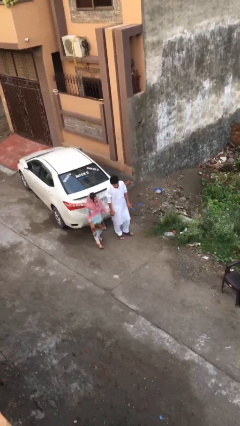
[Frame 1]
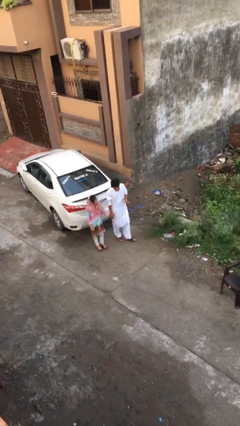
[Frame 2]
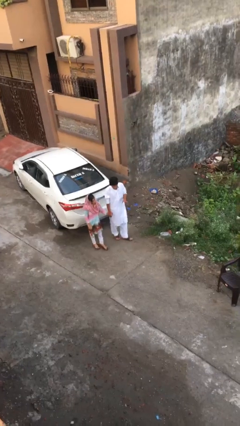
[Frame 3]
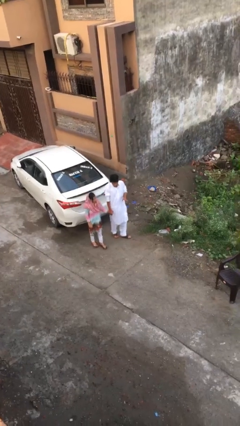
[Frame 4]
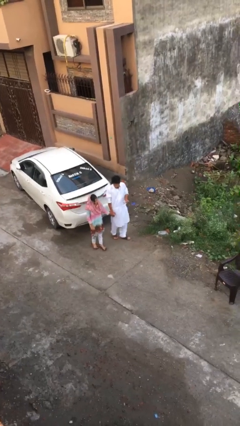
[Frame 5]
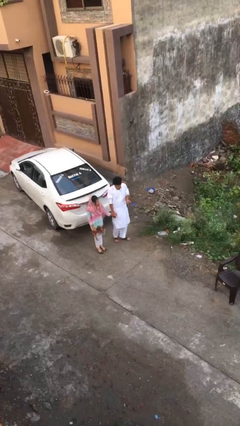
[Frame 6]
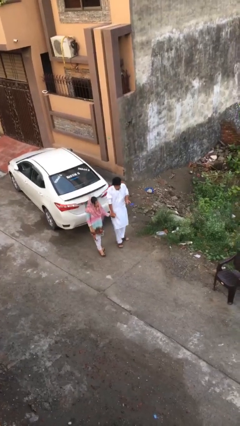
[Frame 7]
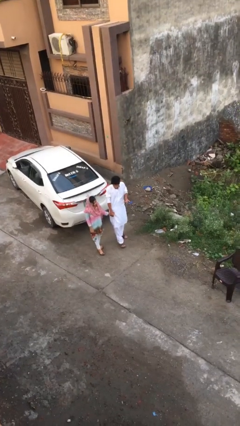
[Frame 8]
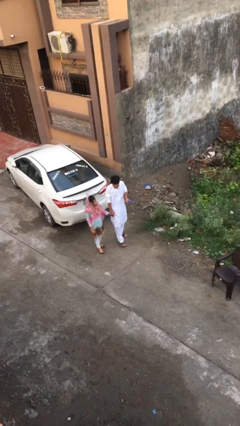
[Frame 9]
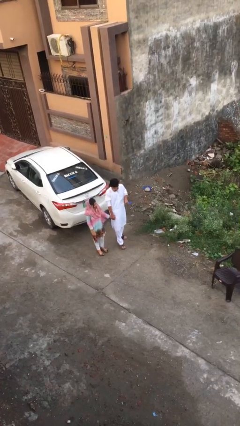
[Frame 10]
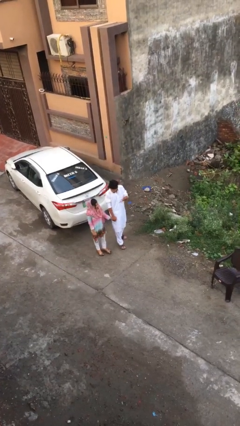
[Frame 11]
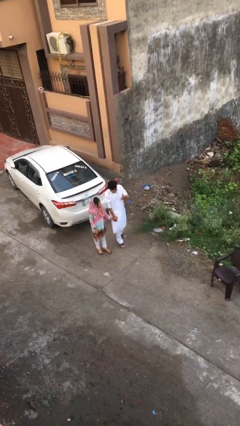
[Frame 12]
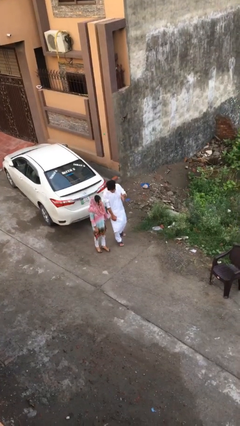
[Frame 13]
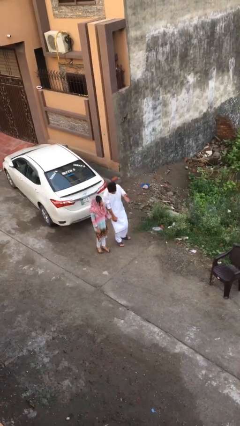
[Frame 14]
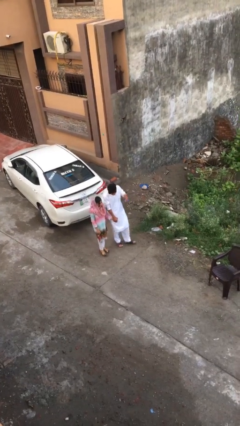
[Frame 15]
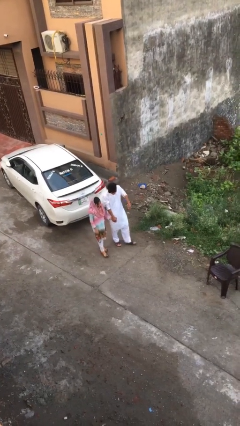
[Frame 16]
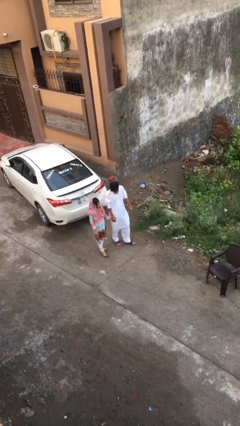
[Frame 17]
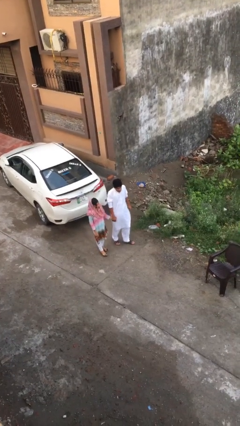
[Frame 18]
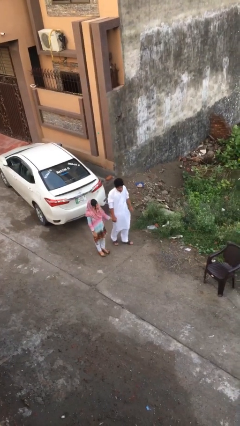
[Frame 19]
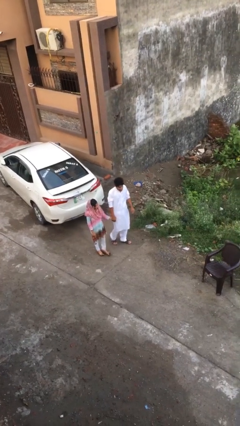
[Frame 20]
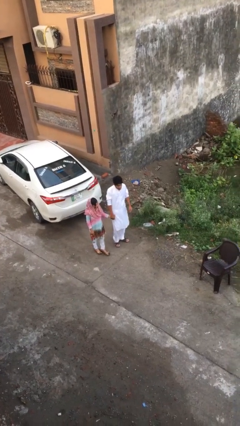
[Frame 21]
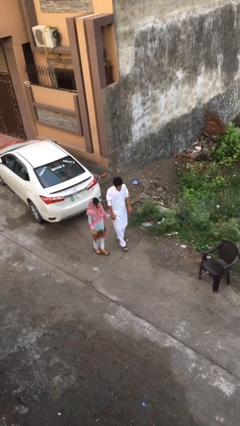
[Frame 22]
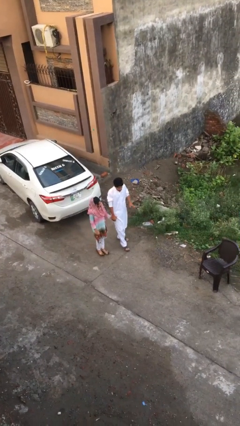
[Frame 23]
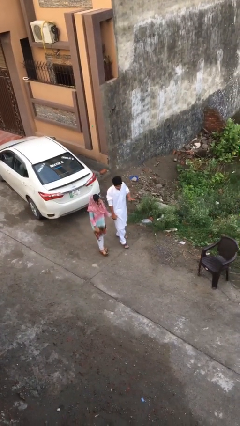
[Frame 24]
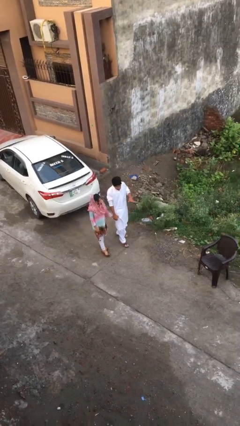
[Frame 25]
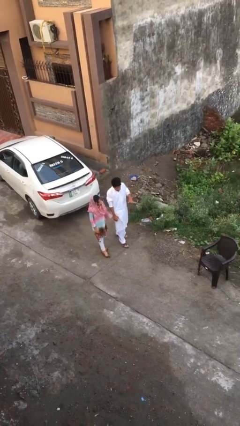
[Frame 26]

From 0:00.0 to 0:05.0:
person holds hand

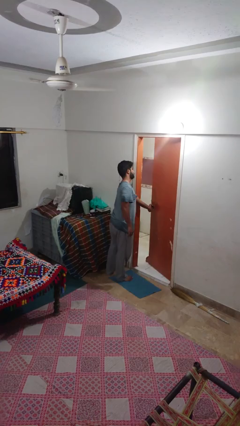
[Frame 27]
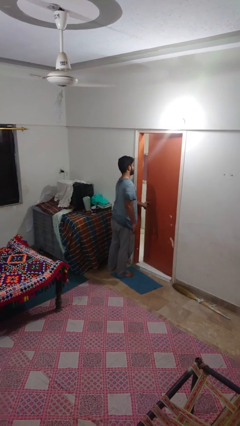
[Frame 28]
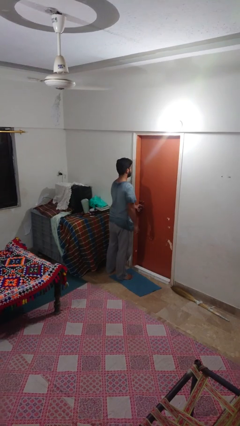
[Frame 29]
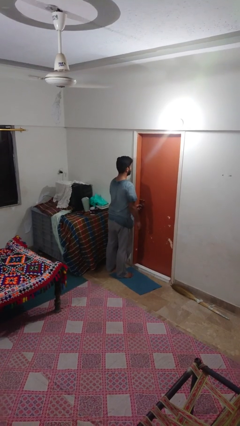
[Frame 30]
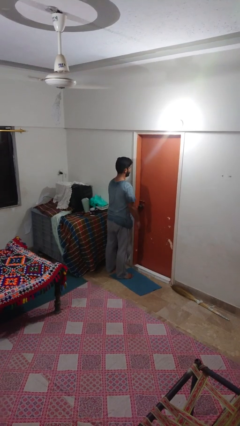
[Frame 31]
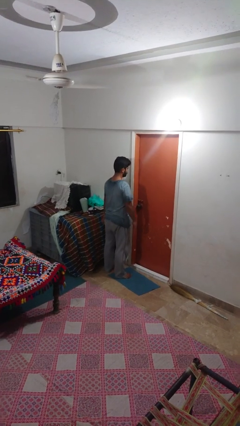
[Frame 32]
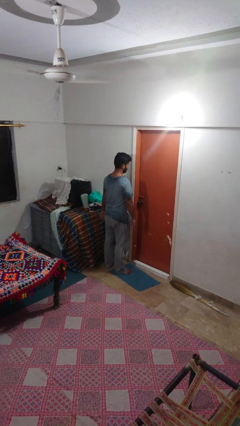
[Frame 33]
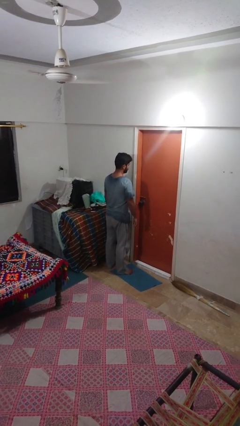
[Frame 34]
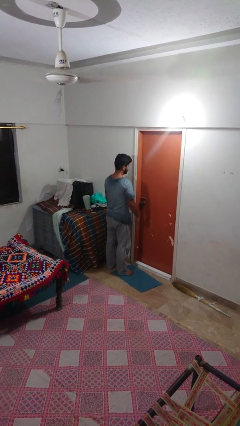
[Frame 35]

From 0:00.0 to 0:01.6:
person closes facility door

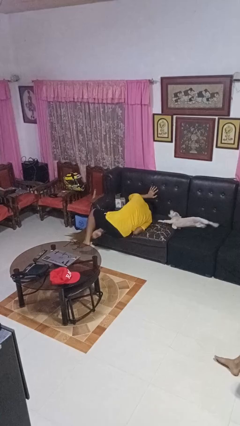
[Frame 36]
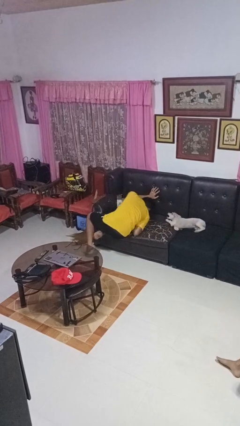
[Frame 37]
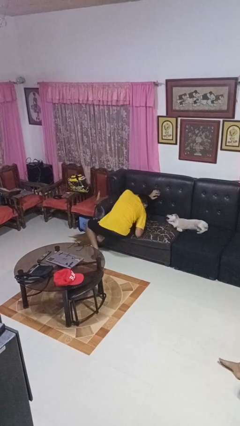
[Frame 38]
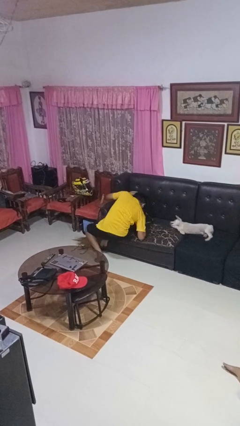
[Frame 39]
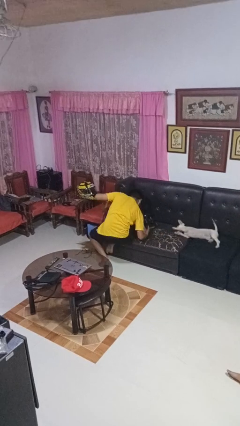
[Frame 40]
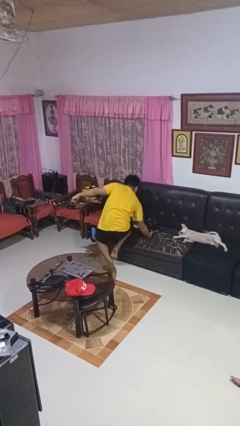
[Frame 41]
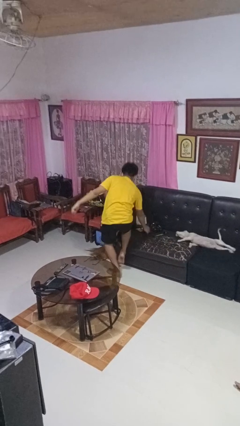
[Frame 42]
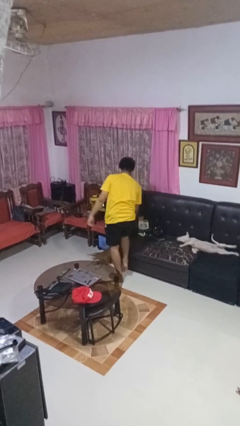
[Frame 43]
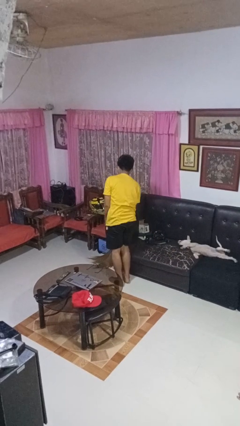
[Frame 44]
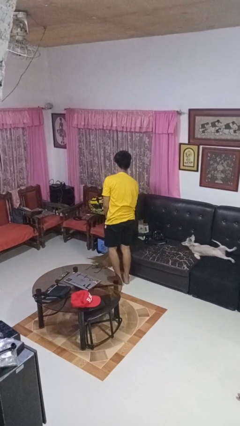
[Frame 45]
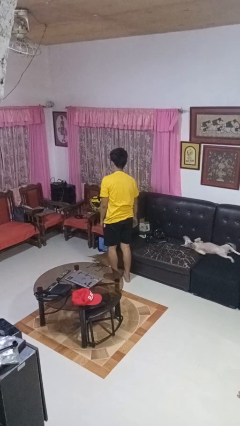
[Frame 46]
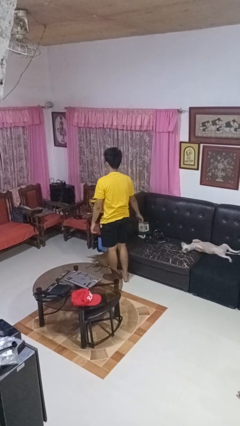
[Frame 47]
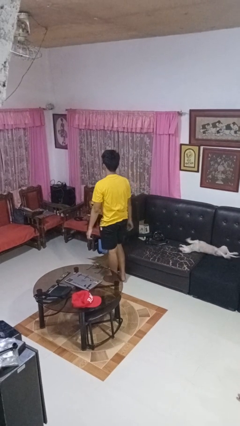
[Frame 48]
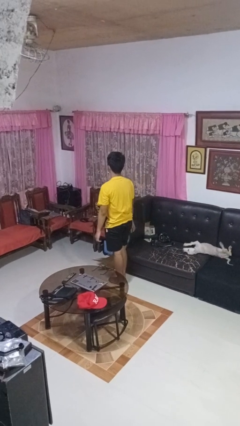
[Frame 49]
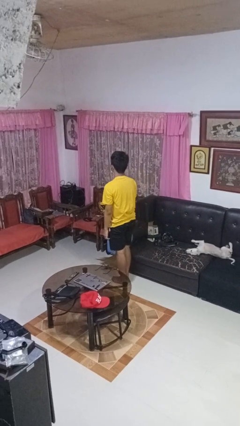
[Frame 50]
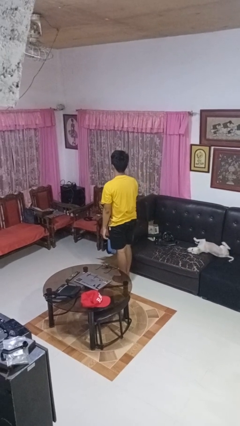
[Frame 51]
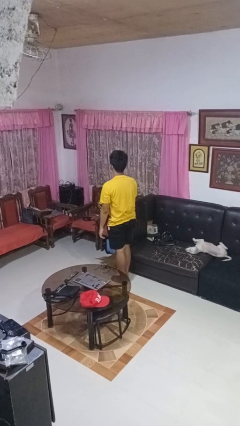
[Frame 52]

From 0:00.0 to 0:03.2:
person stands up

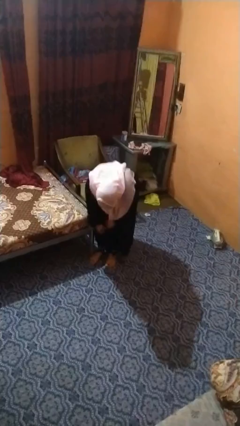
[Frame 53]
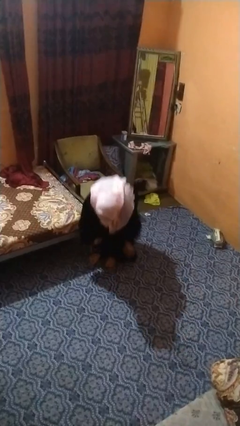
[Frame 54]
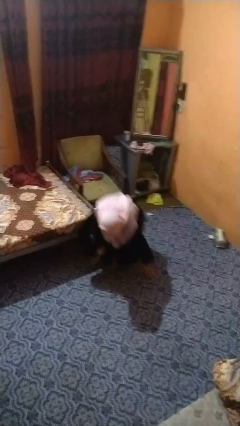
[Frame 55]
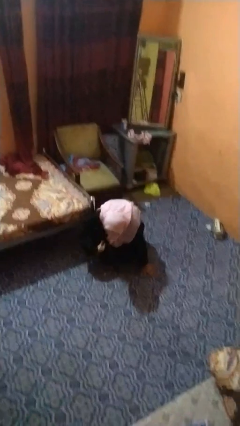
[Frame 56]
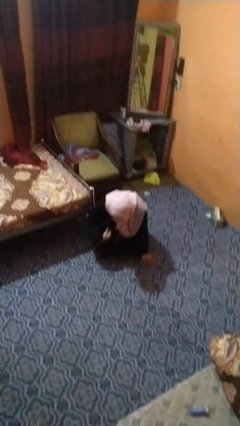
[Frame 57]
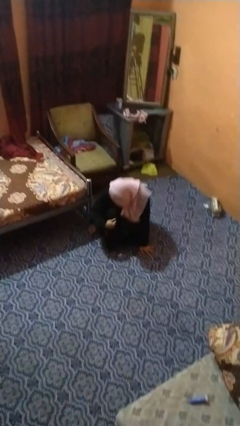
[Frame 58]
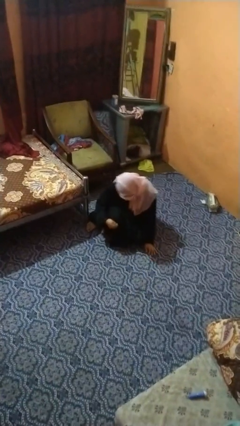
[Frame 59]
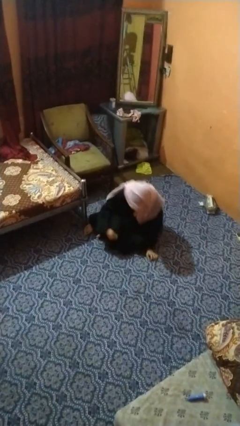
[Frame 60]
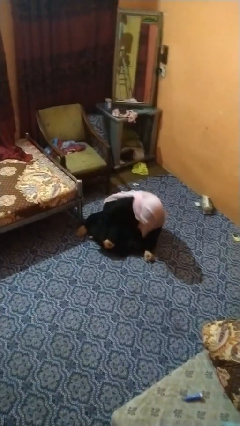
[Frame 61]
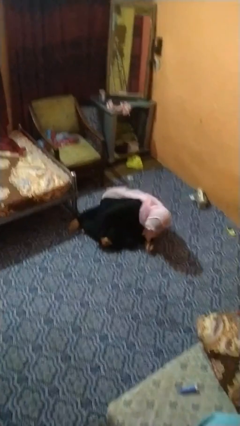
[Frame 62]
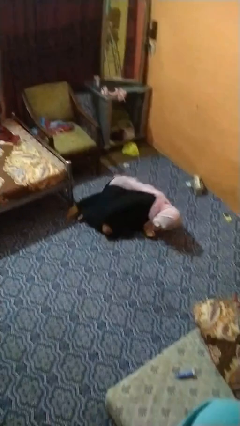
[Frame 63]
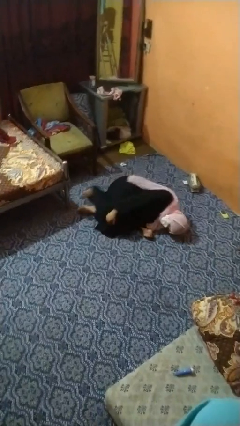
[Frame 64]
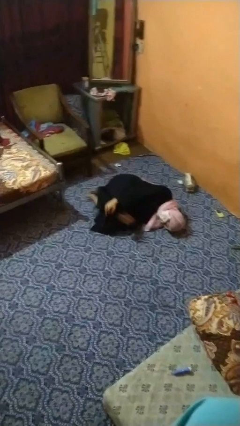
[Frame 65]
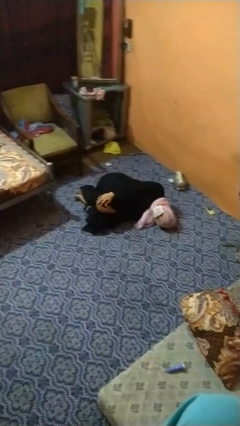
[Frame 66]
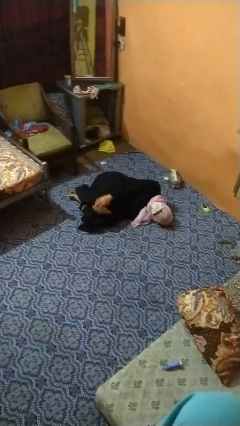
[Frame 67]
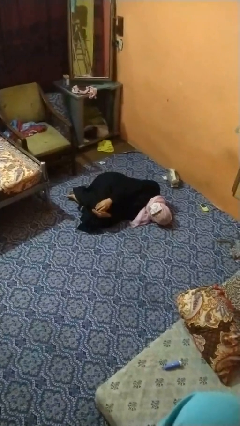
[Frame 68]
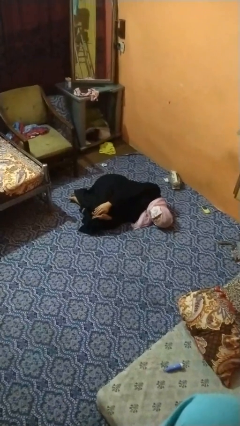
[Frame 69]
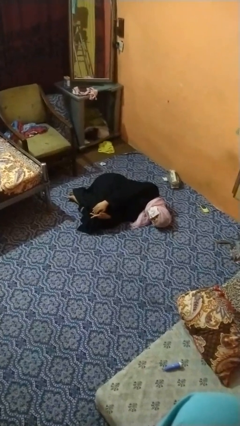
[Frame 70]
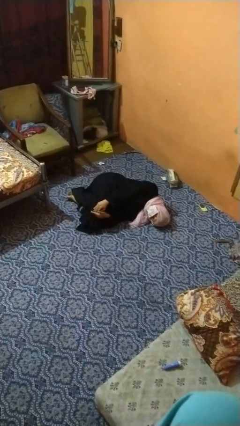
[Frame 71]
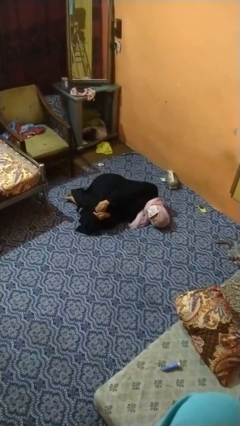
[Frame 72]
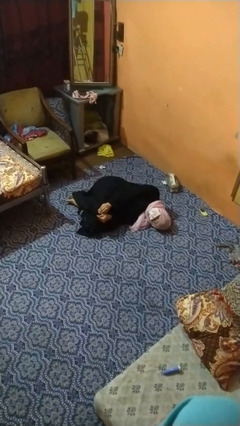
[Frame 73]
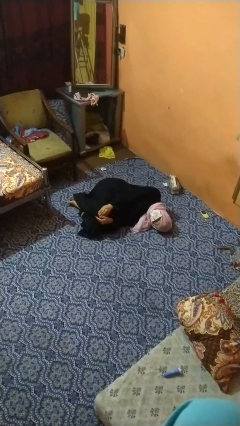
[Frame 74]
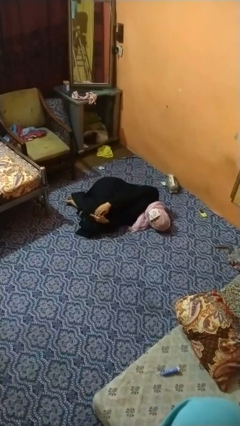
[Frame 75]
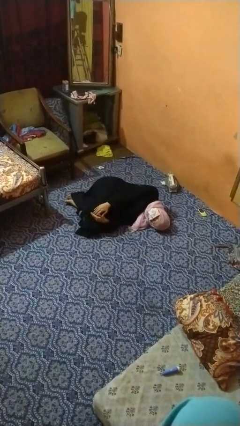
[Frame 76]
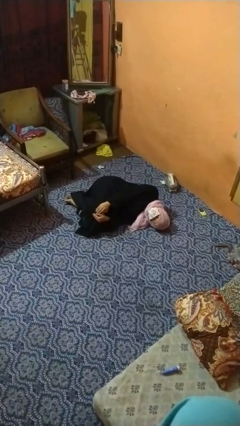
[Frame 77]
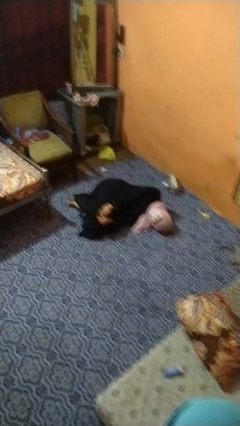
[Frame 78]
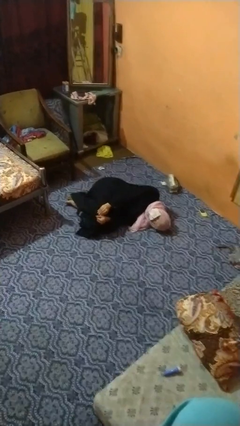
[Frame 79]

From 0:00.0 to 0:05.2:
person lies down on floor

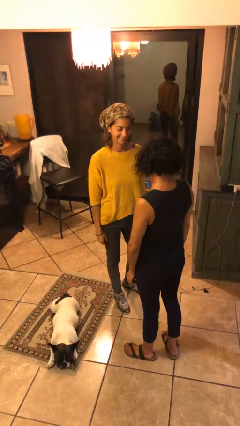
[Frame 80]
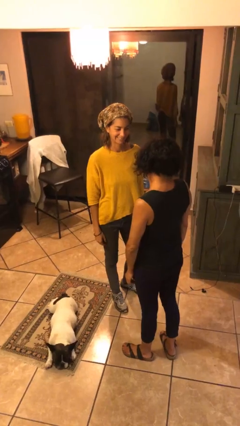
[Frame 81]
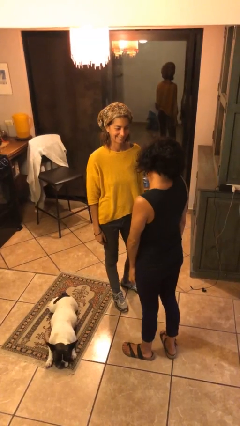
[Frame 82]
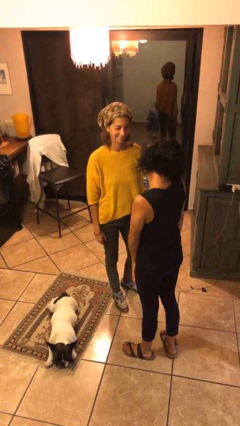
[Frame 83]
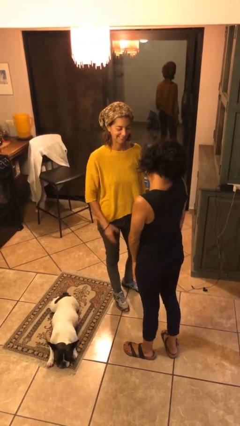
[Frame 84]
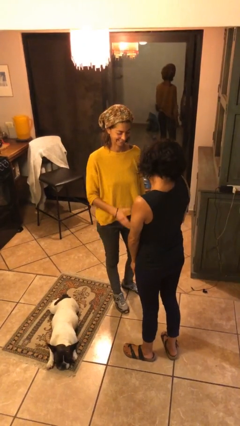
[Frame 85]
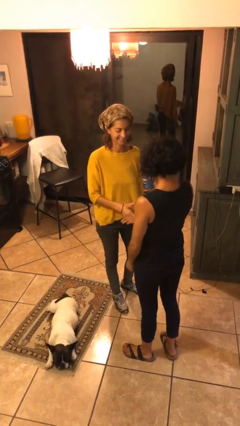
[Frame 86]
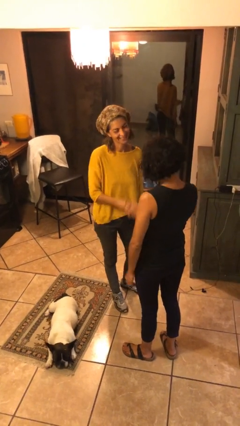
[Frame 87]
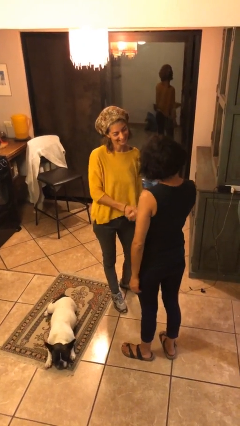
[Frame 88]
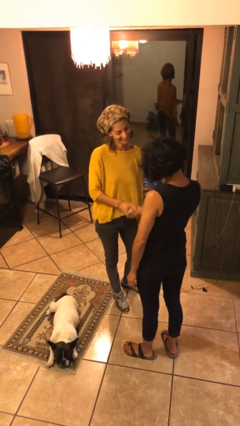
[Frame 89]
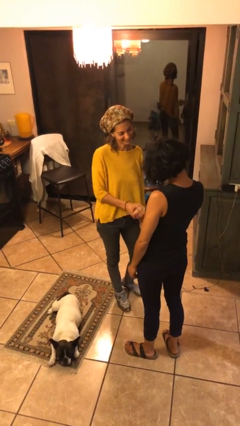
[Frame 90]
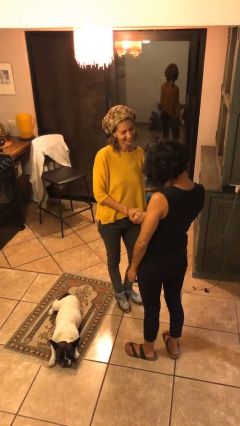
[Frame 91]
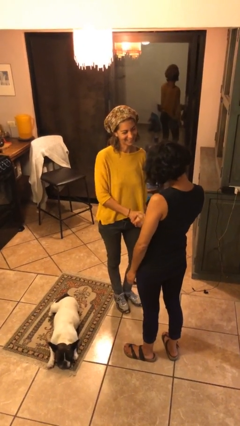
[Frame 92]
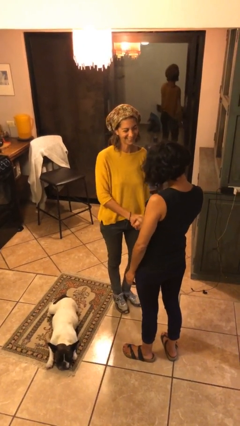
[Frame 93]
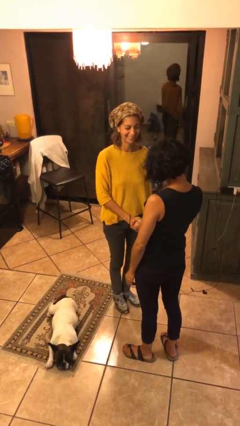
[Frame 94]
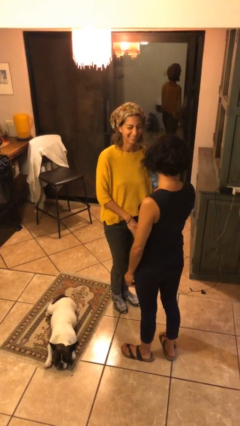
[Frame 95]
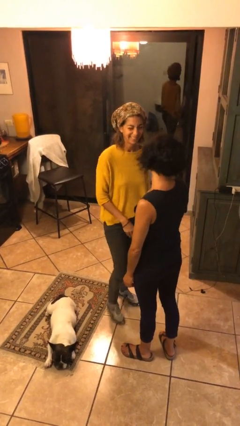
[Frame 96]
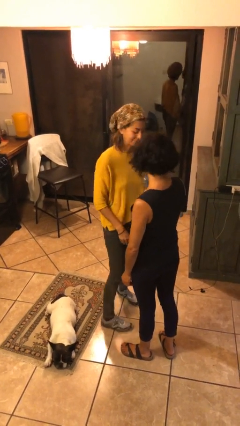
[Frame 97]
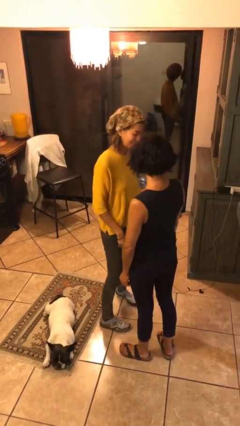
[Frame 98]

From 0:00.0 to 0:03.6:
person shakes hand
